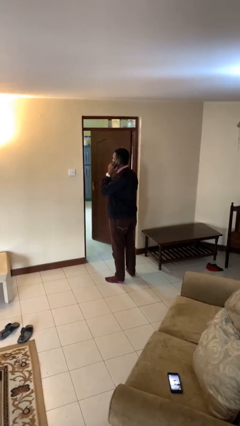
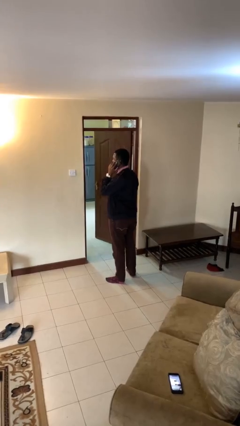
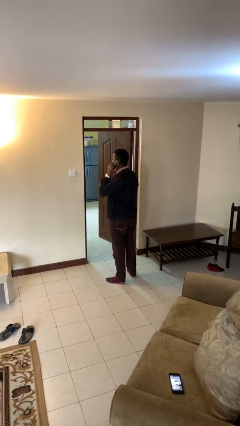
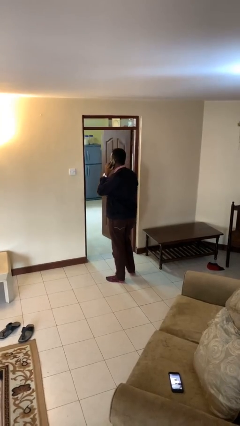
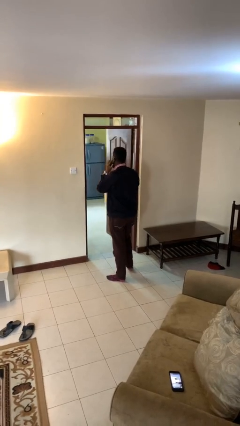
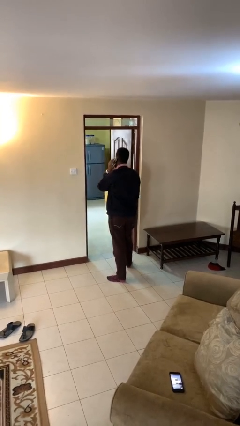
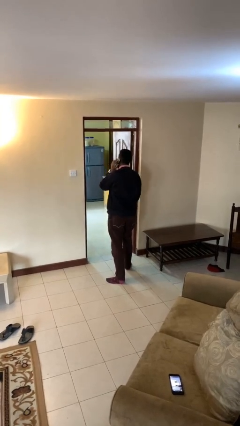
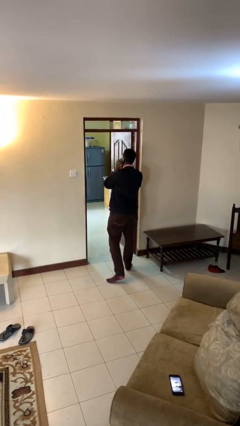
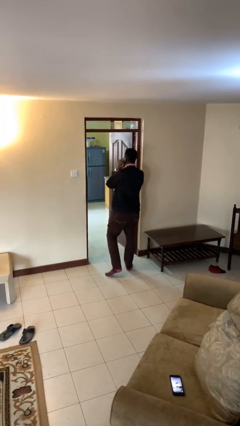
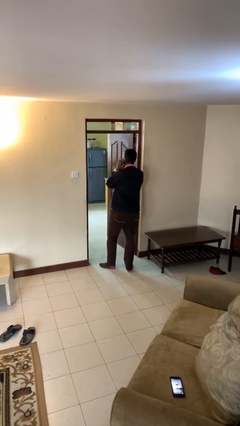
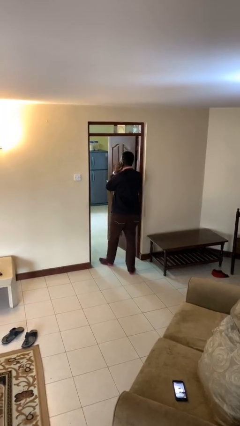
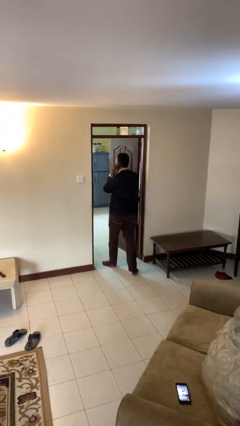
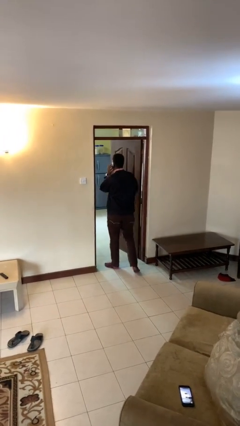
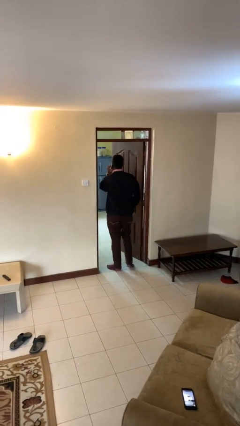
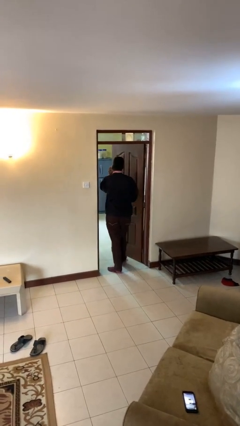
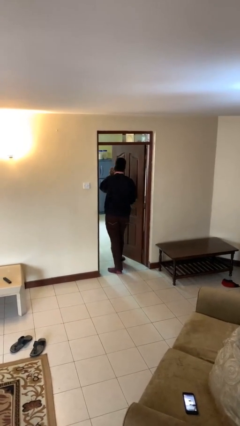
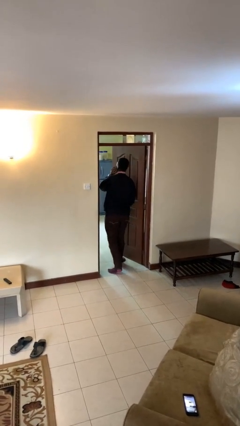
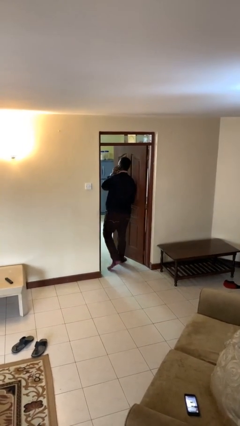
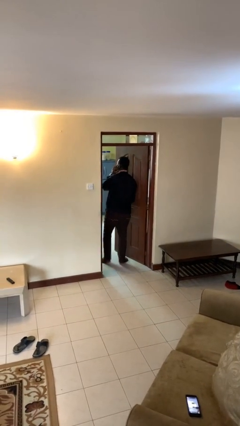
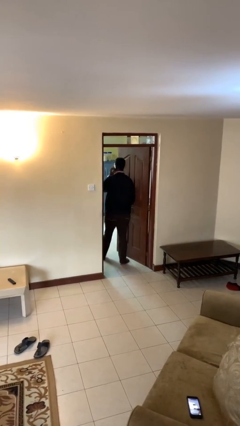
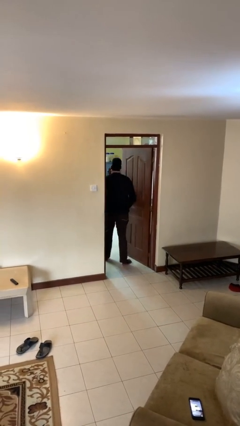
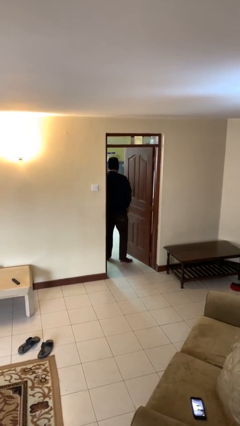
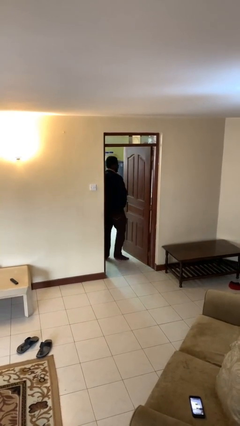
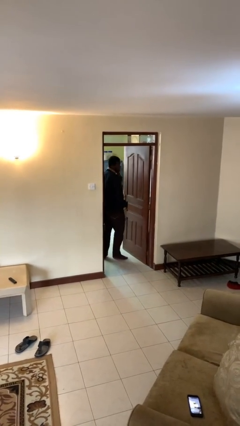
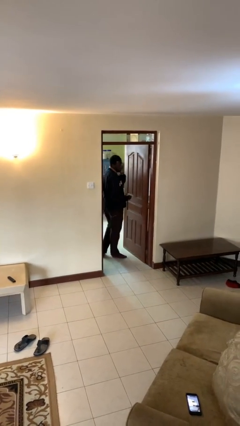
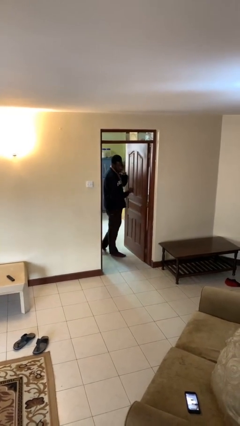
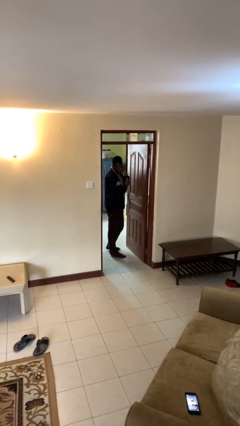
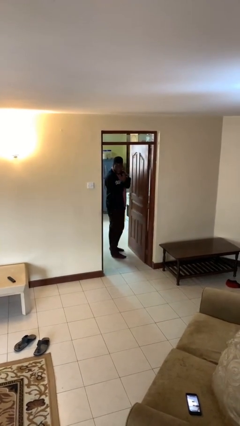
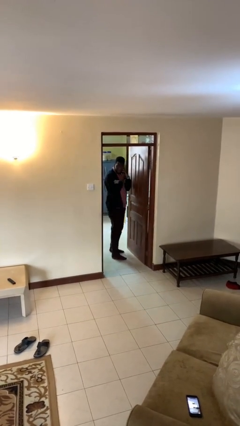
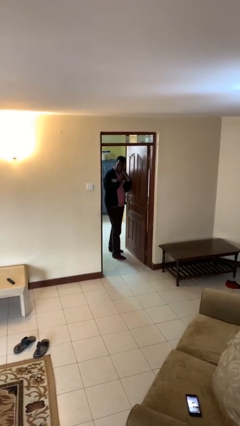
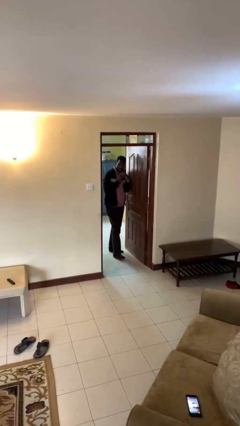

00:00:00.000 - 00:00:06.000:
person exits scene through structure

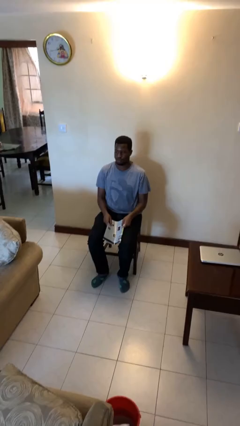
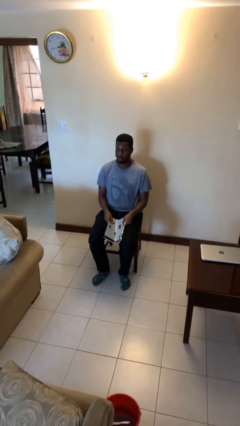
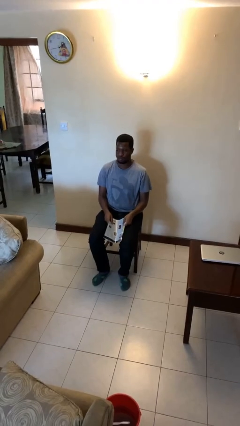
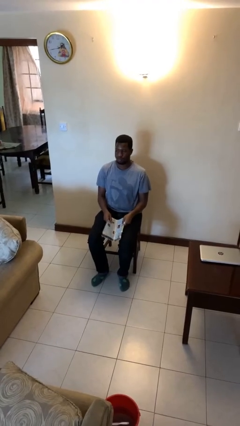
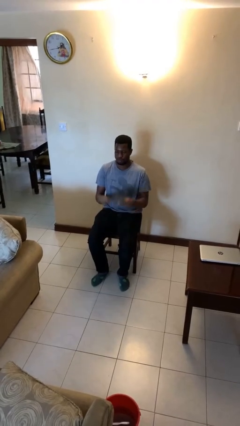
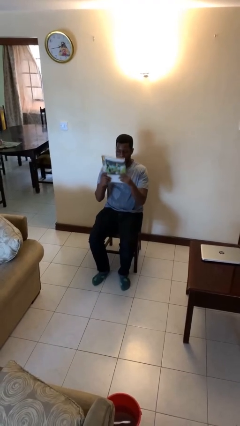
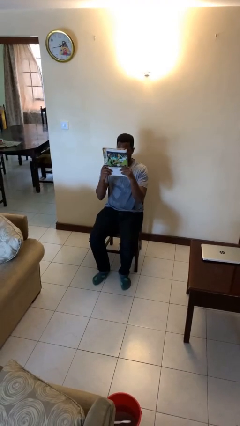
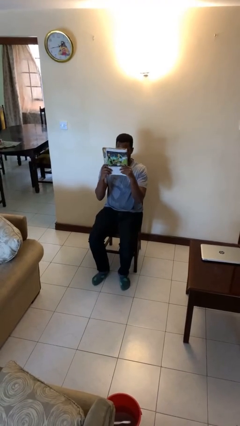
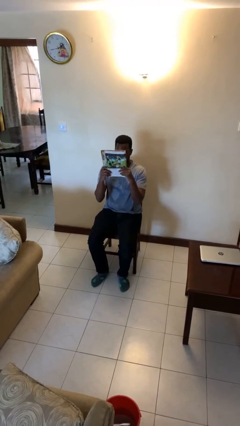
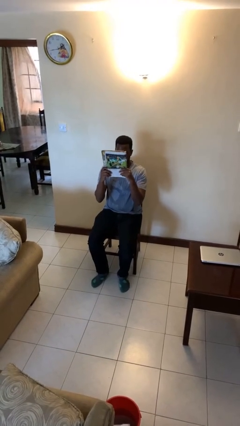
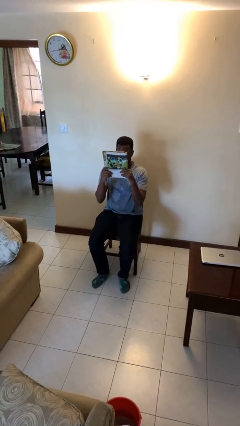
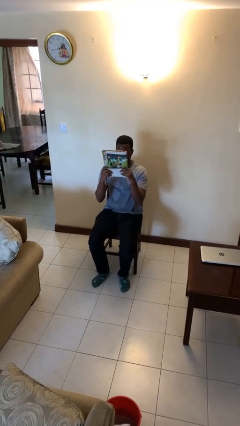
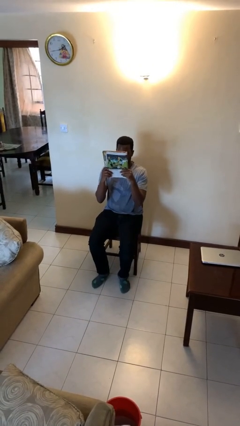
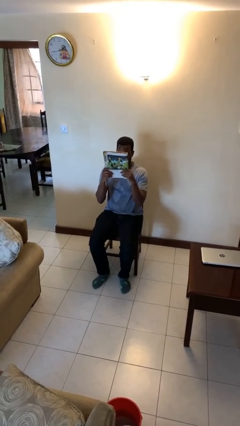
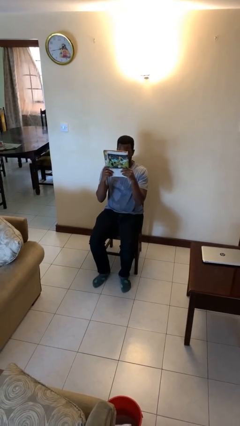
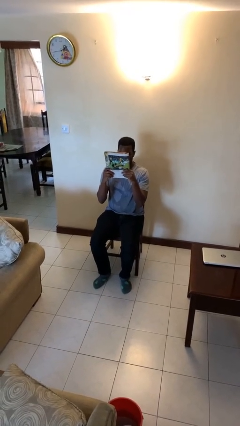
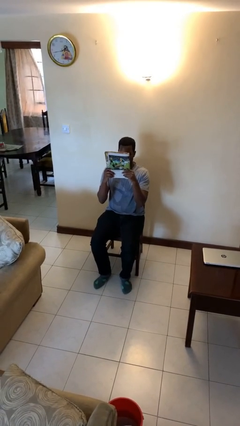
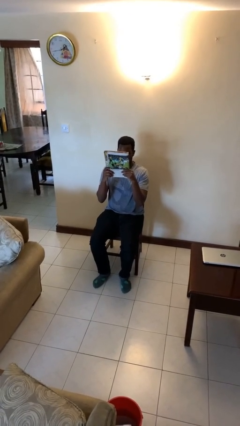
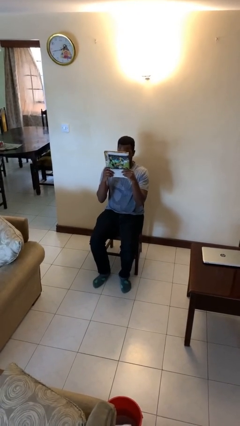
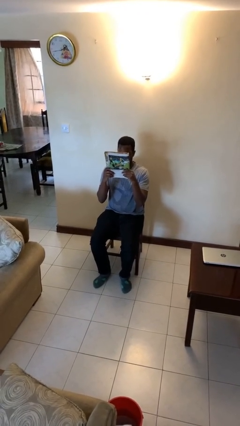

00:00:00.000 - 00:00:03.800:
person reads document

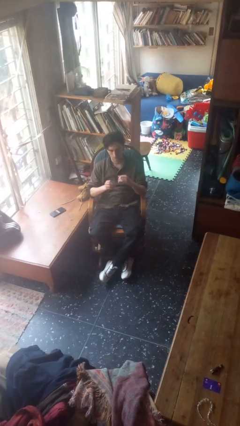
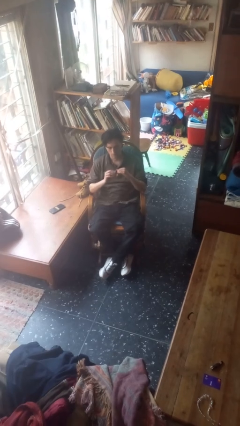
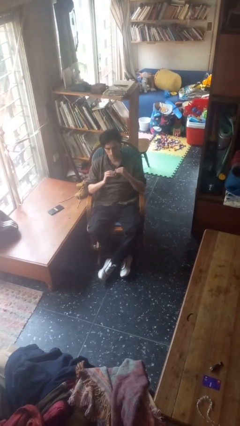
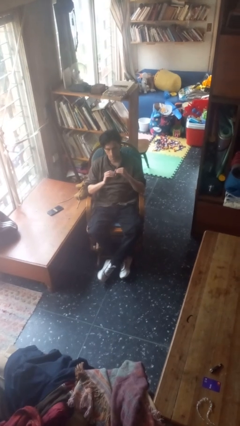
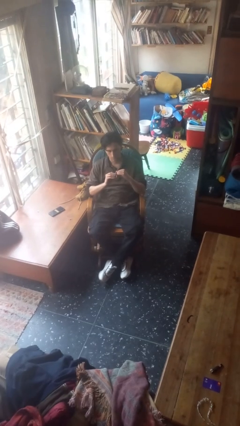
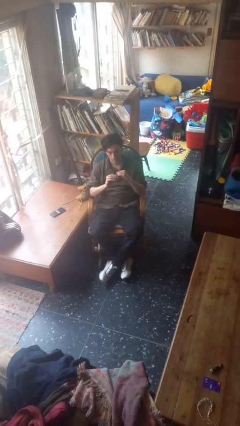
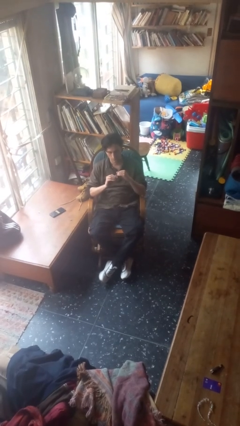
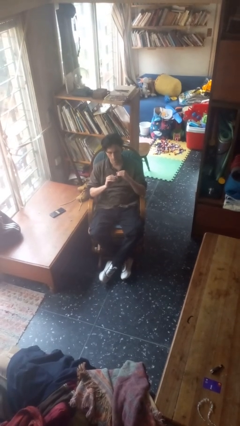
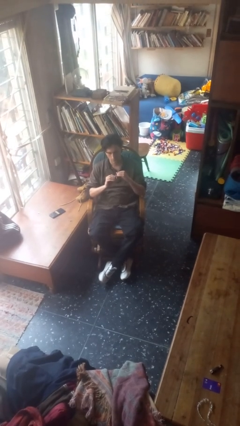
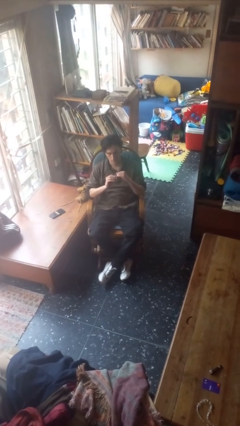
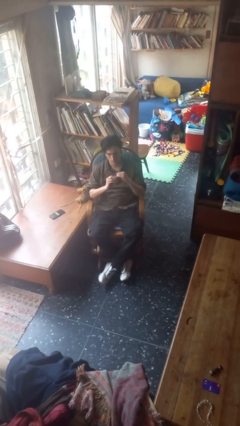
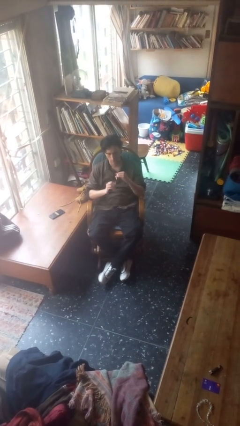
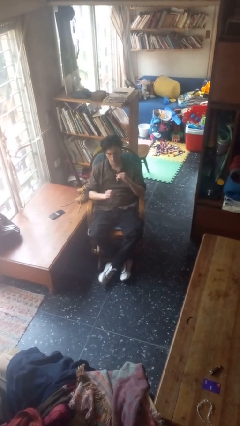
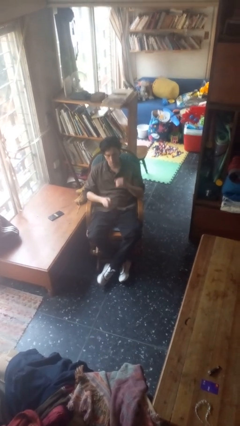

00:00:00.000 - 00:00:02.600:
person files fingernails

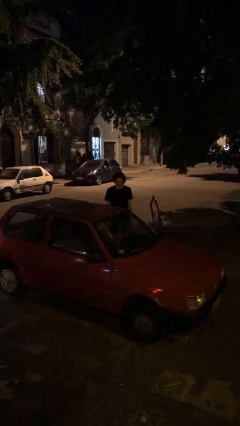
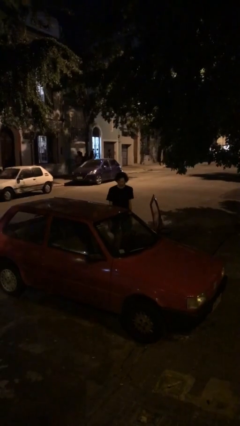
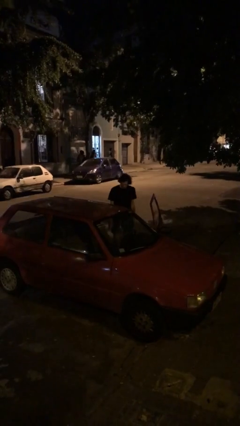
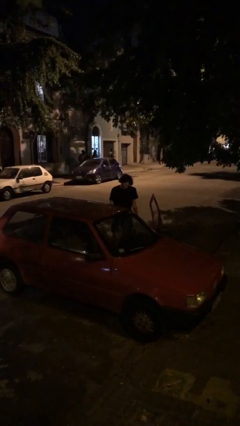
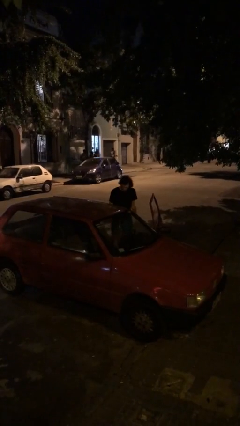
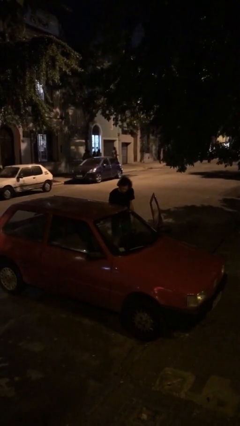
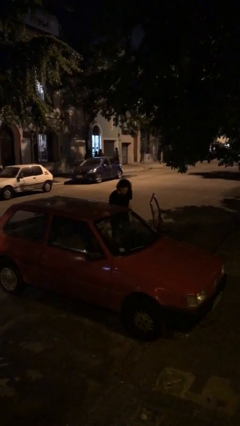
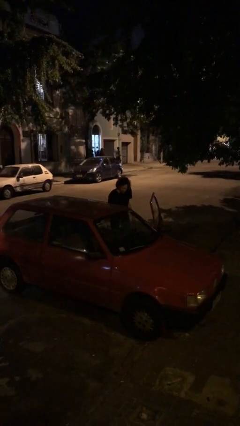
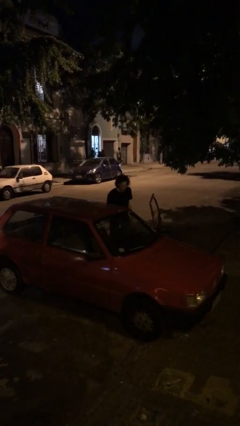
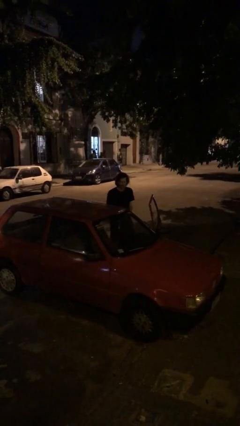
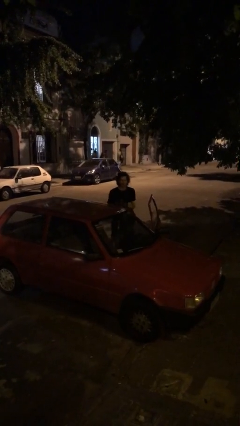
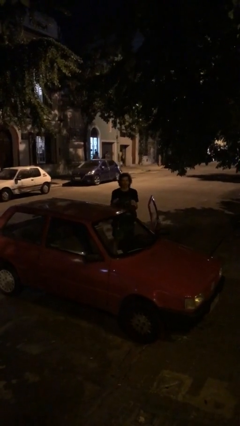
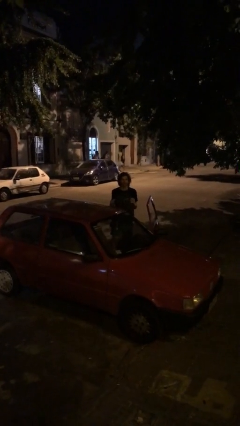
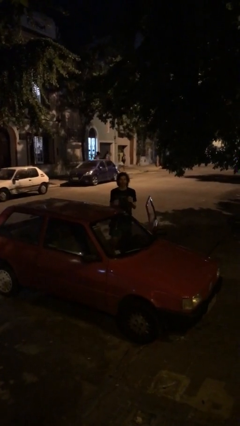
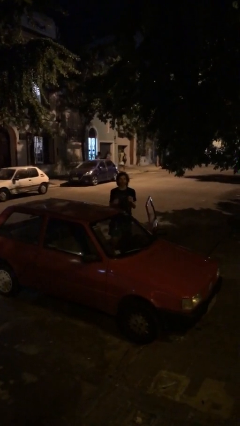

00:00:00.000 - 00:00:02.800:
person unloads car

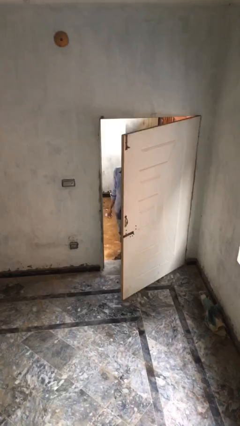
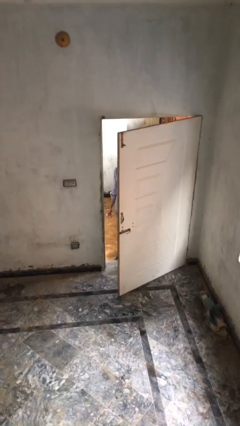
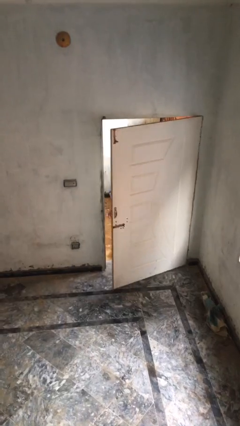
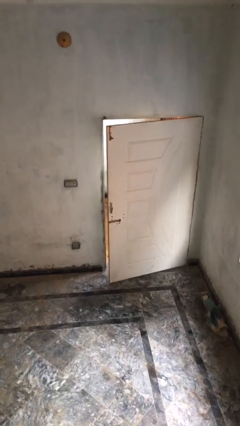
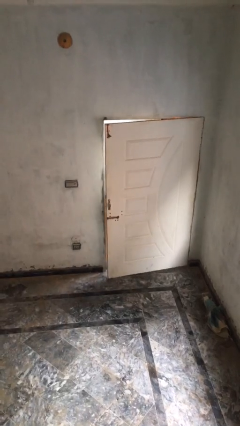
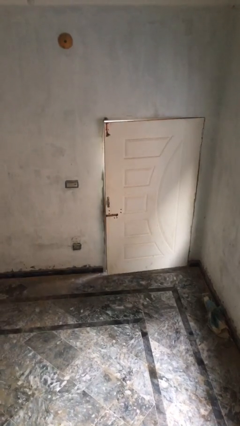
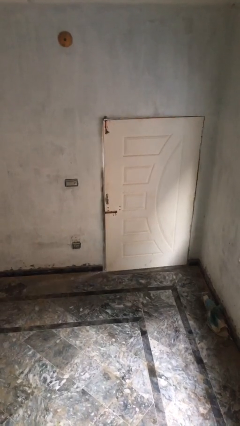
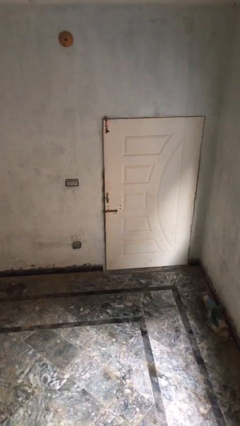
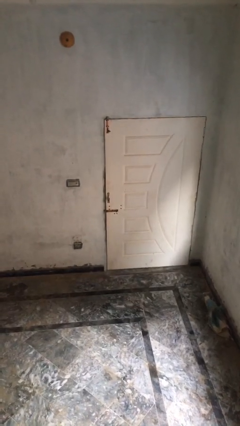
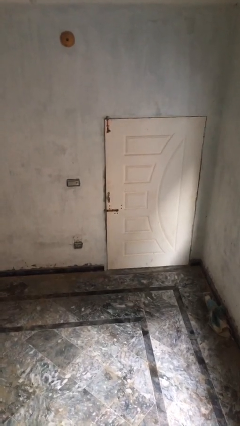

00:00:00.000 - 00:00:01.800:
person closes facility door

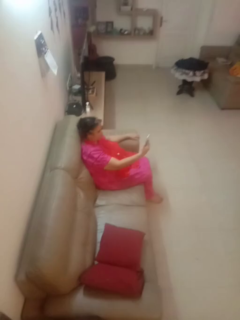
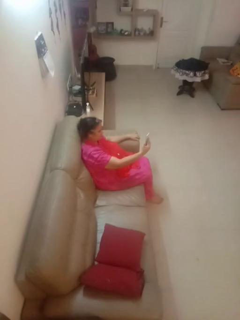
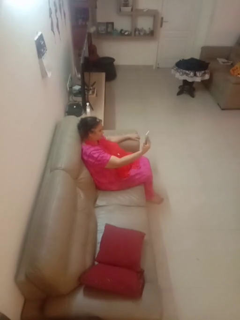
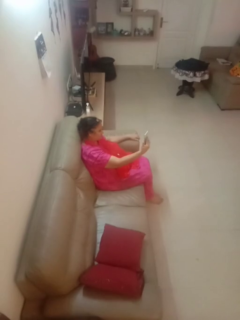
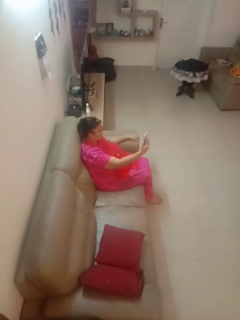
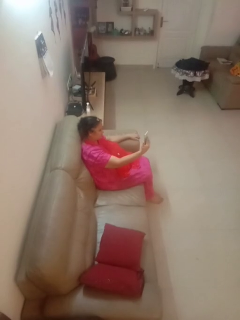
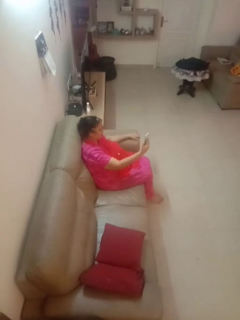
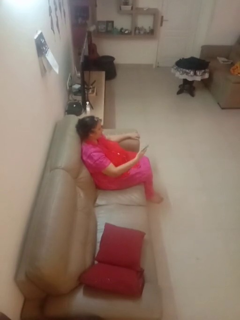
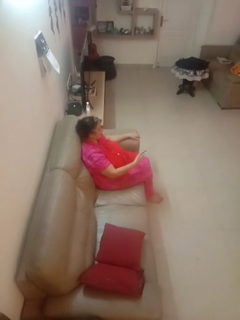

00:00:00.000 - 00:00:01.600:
person takes selfie
